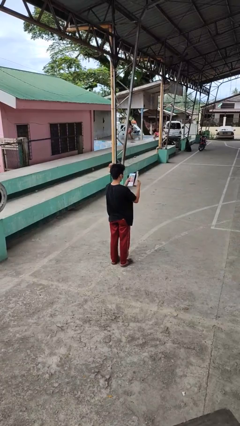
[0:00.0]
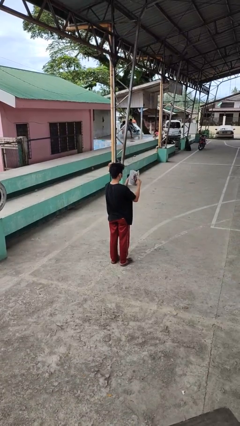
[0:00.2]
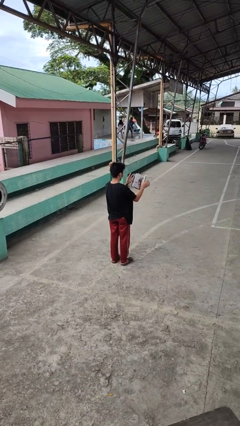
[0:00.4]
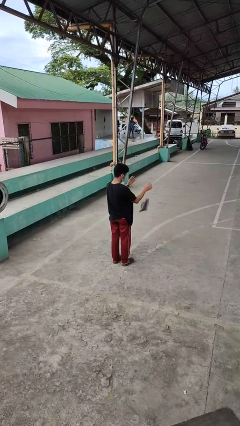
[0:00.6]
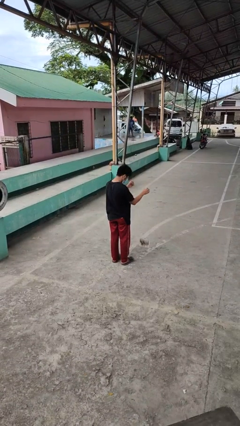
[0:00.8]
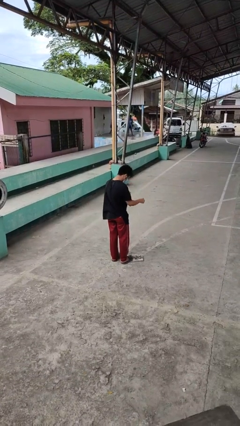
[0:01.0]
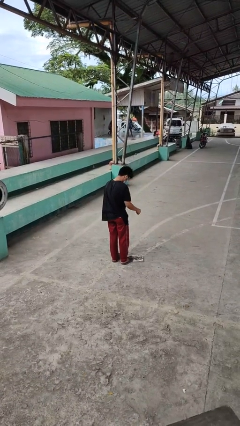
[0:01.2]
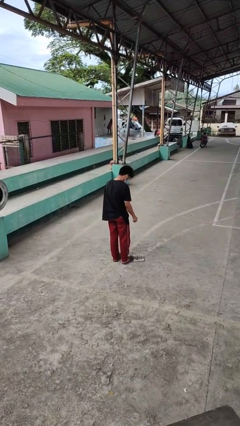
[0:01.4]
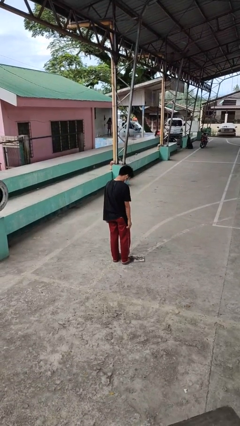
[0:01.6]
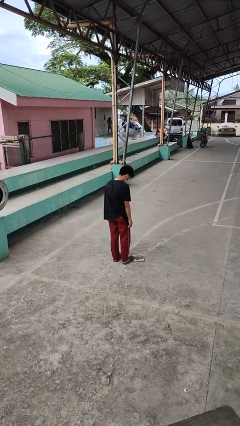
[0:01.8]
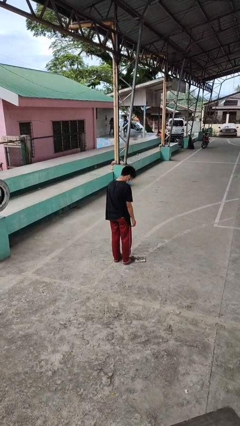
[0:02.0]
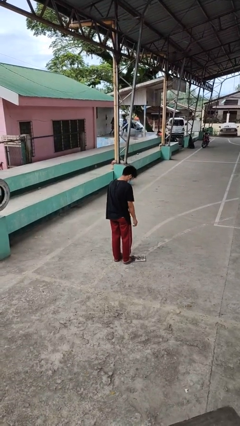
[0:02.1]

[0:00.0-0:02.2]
person drops object

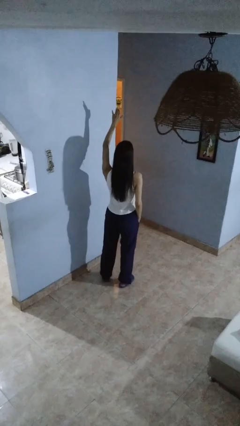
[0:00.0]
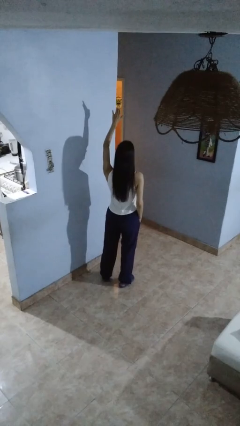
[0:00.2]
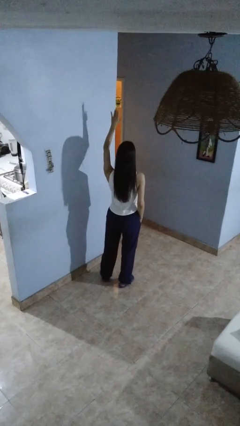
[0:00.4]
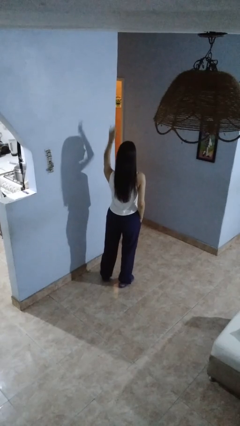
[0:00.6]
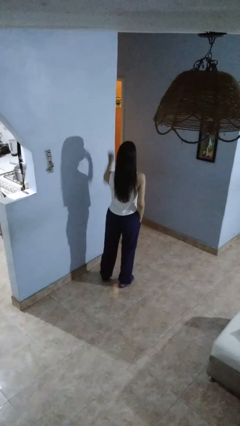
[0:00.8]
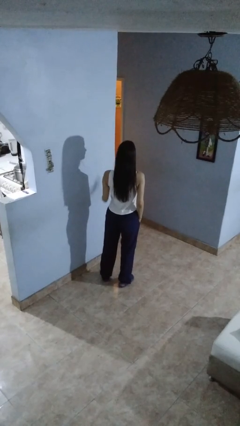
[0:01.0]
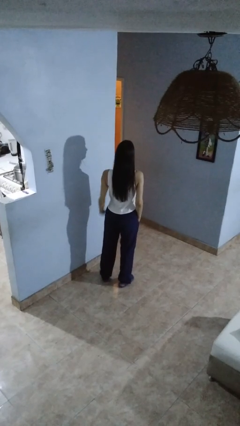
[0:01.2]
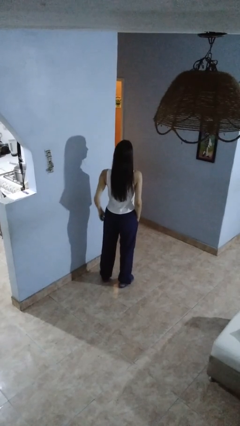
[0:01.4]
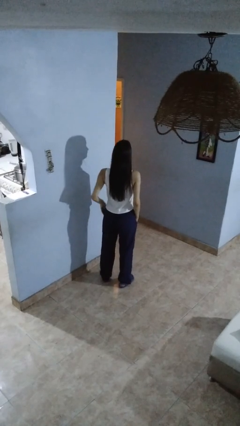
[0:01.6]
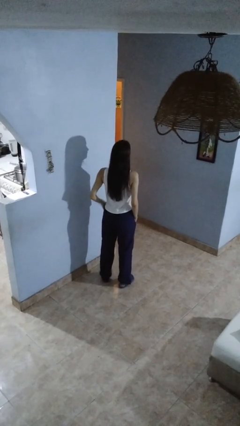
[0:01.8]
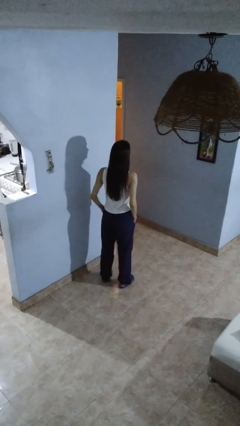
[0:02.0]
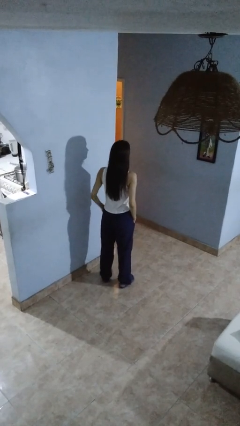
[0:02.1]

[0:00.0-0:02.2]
person gestures lower hand

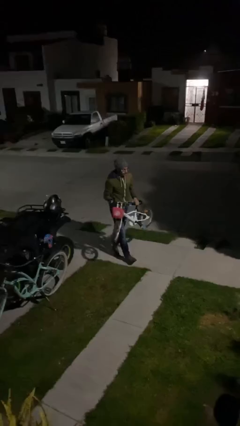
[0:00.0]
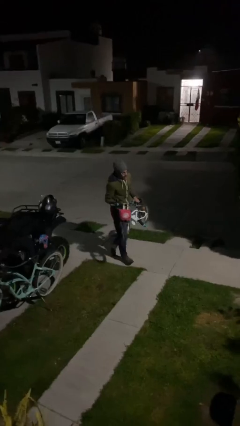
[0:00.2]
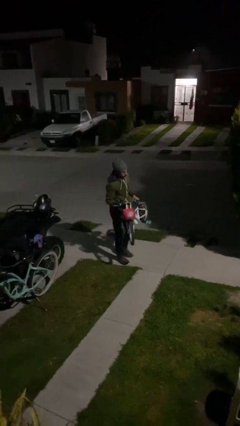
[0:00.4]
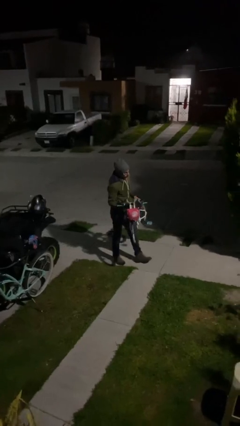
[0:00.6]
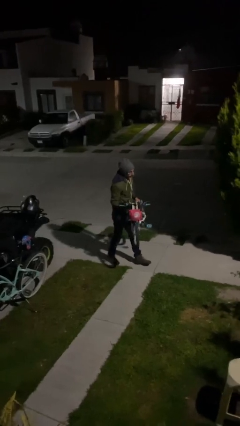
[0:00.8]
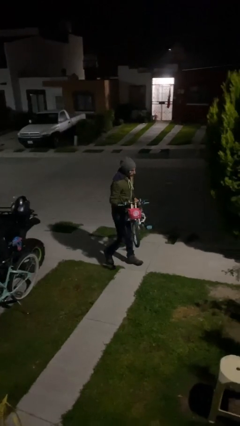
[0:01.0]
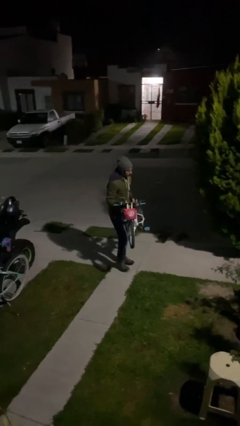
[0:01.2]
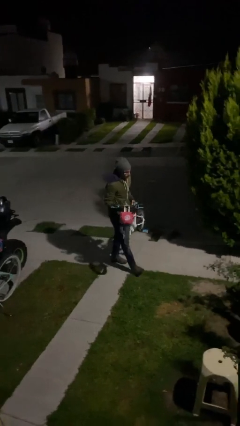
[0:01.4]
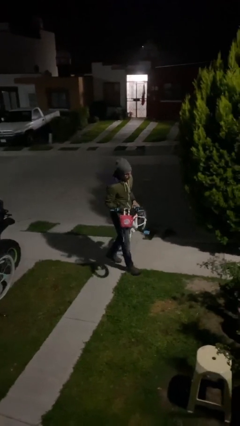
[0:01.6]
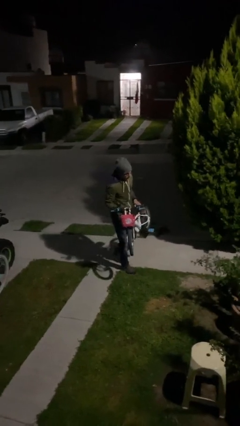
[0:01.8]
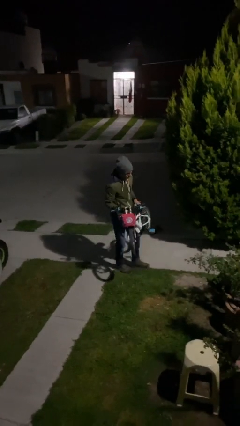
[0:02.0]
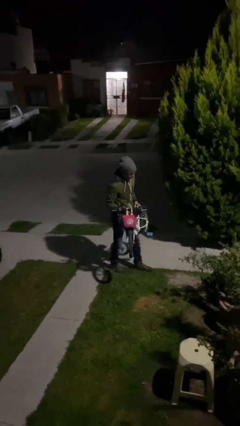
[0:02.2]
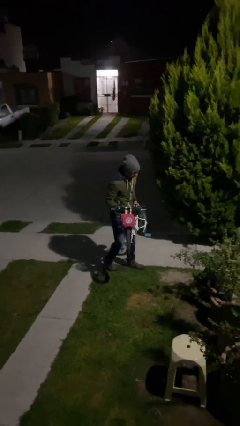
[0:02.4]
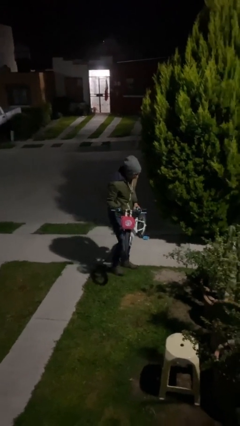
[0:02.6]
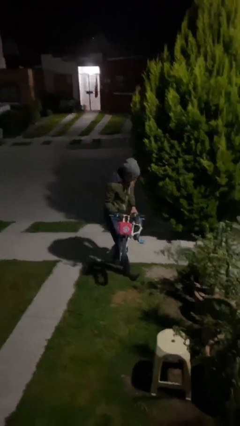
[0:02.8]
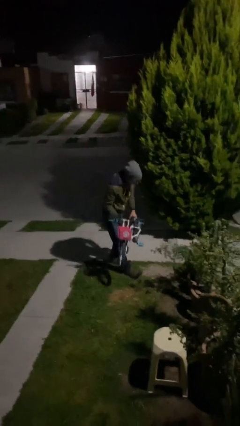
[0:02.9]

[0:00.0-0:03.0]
person carries heavy object

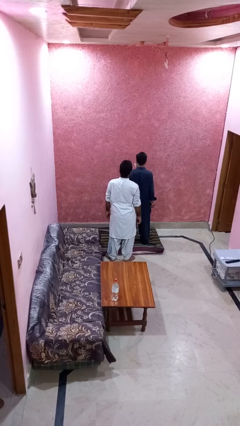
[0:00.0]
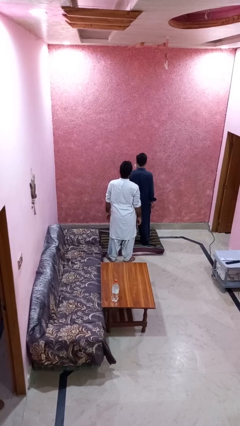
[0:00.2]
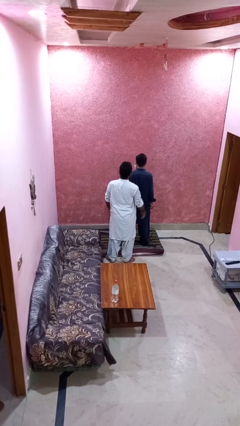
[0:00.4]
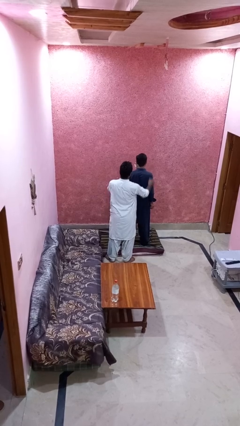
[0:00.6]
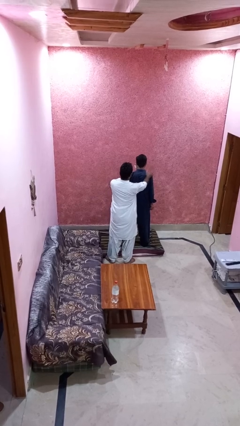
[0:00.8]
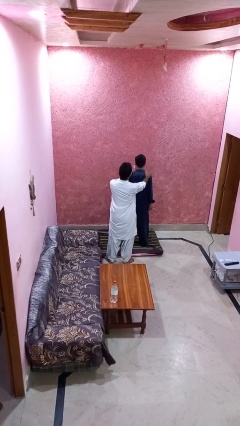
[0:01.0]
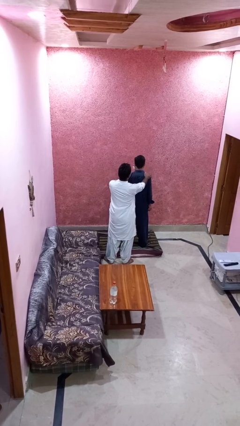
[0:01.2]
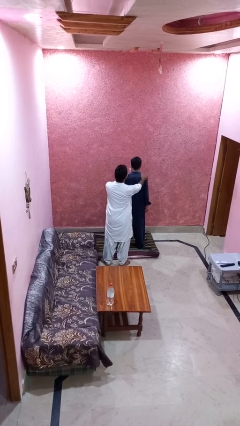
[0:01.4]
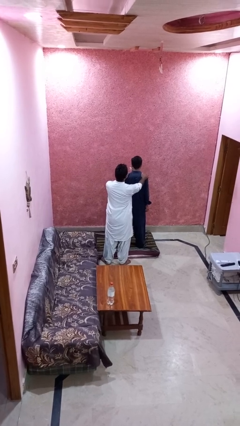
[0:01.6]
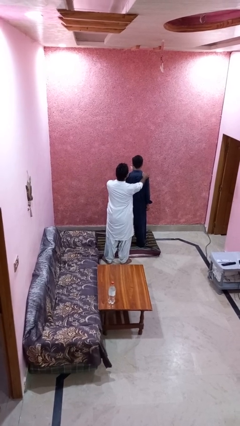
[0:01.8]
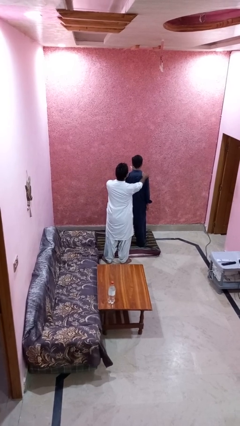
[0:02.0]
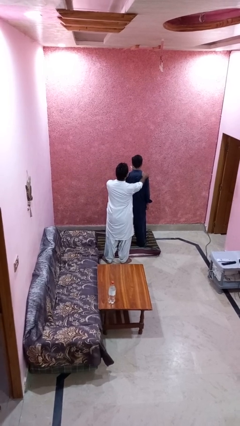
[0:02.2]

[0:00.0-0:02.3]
person grabs person by shoulder

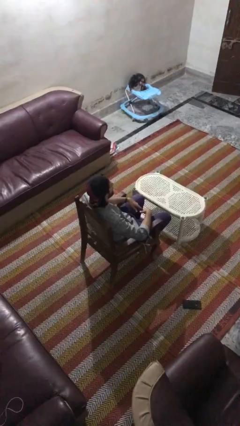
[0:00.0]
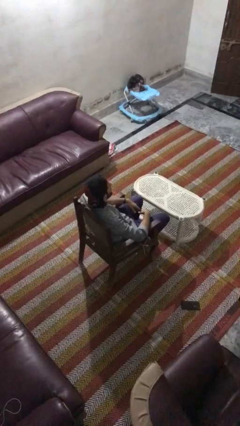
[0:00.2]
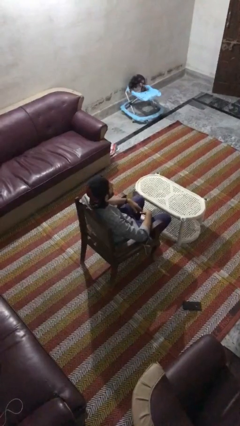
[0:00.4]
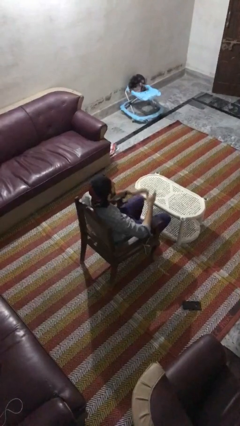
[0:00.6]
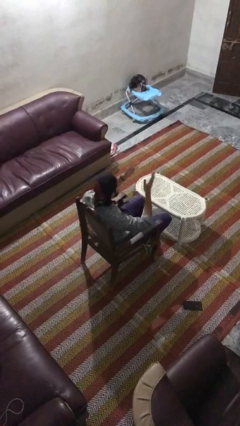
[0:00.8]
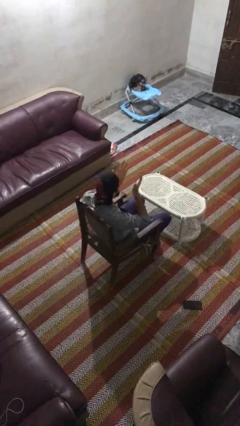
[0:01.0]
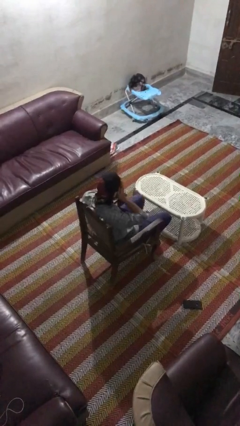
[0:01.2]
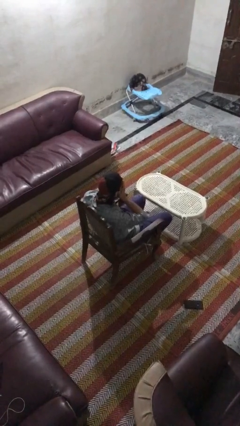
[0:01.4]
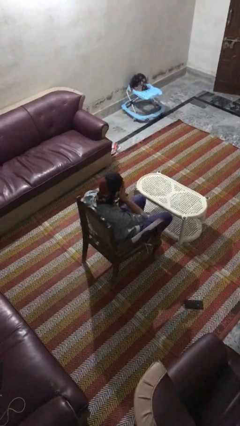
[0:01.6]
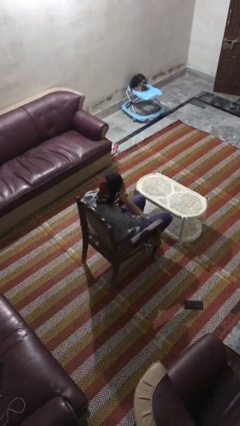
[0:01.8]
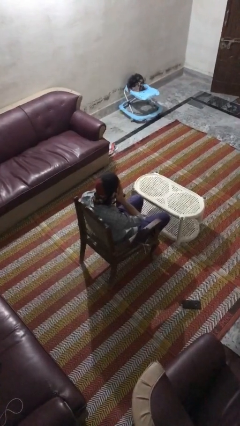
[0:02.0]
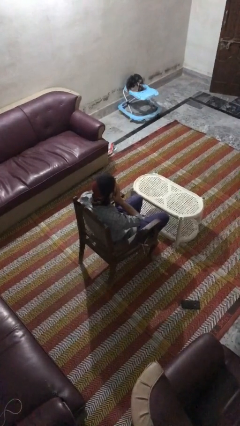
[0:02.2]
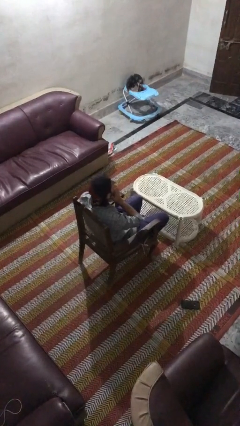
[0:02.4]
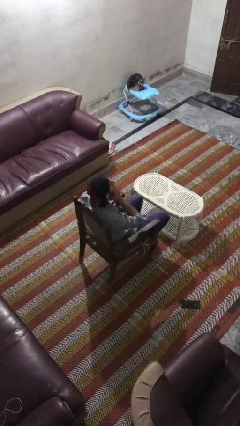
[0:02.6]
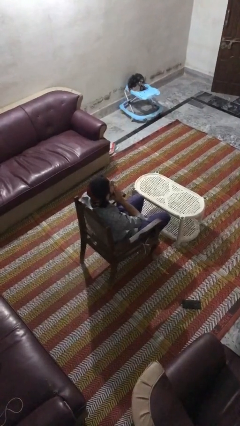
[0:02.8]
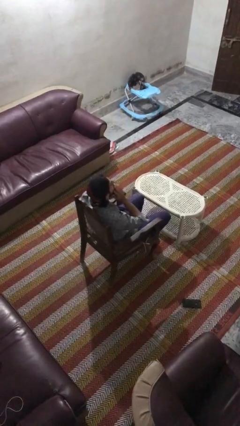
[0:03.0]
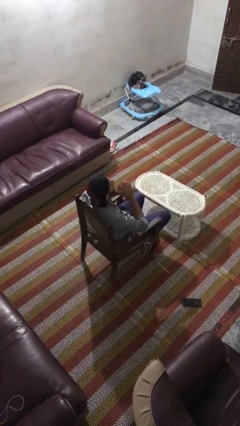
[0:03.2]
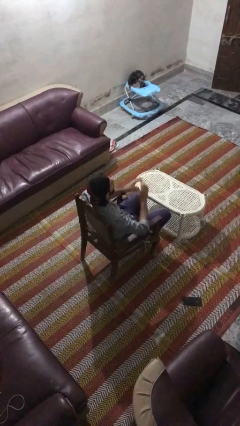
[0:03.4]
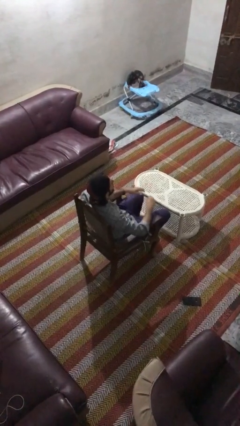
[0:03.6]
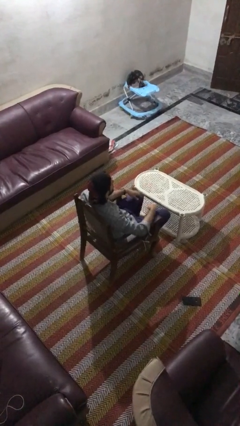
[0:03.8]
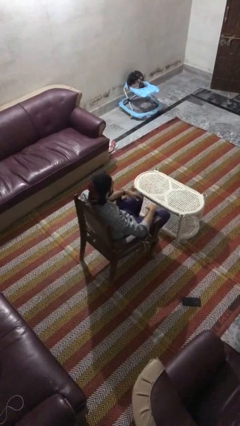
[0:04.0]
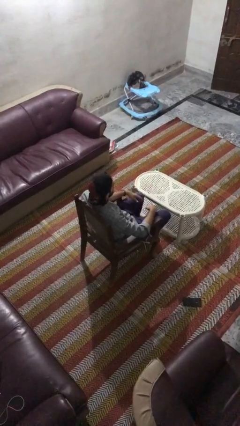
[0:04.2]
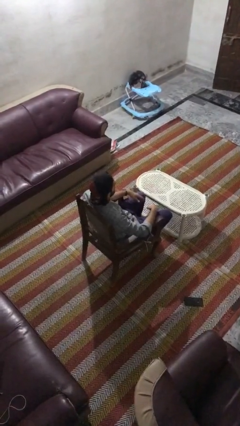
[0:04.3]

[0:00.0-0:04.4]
person covers face with hands

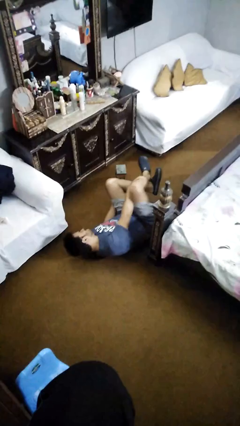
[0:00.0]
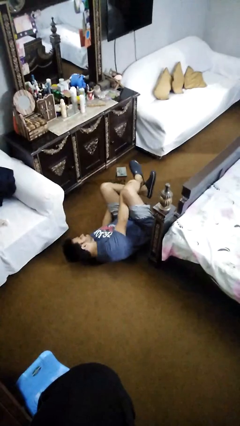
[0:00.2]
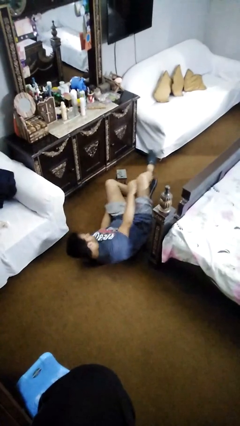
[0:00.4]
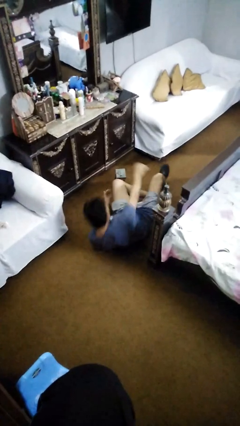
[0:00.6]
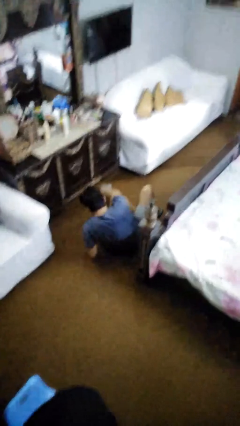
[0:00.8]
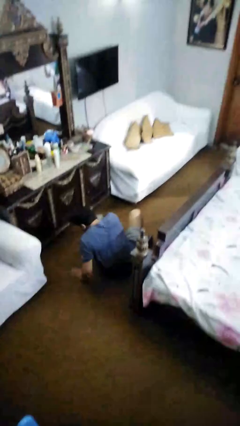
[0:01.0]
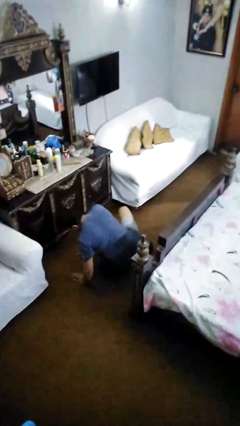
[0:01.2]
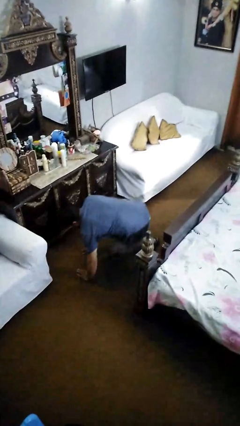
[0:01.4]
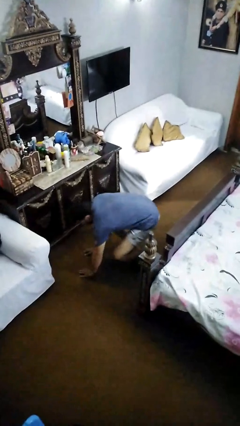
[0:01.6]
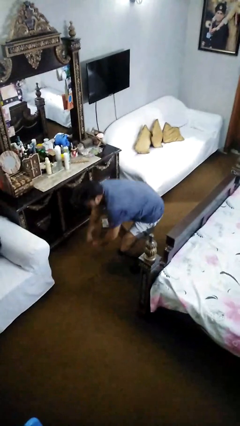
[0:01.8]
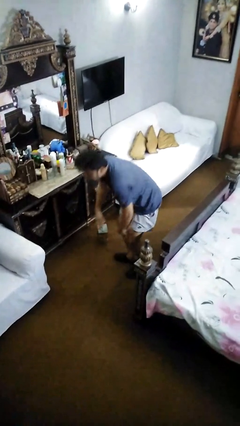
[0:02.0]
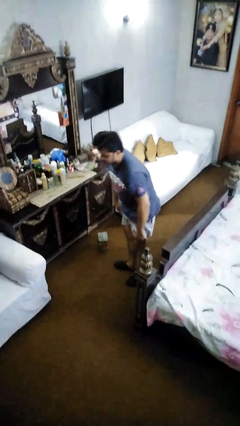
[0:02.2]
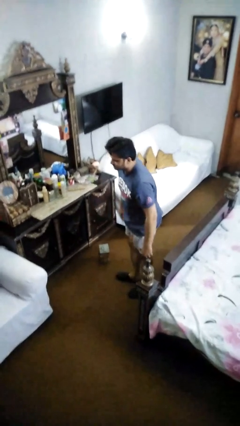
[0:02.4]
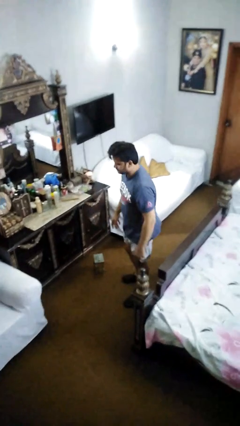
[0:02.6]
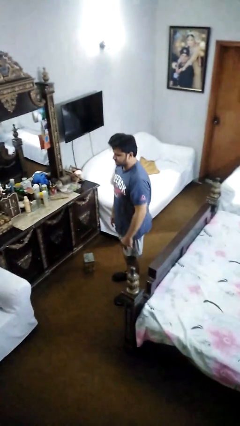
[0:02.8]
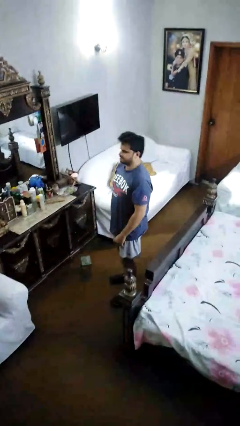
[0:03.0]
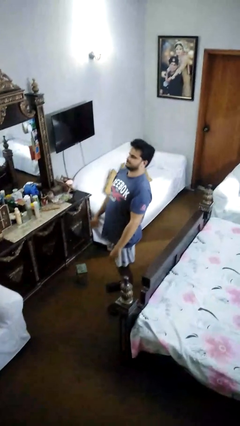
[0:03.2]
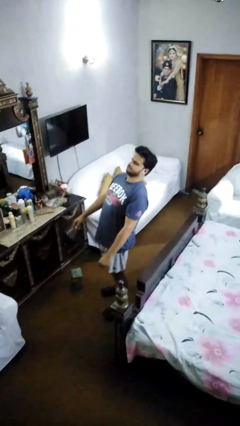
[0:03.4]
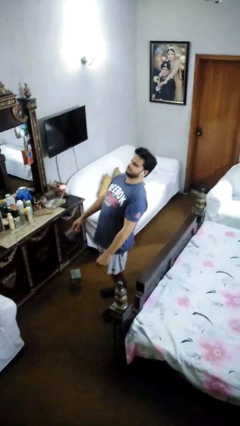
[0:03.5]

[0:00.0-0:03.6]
person stands up from floor
